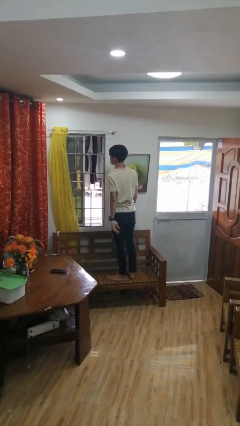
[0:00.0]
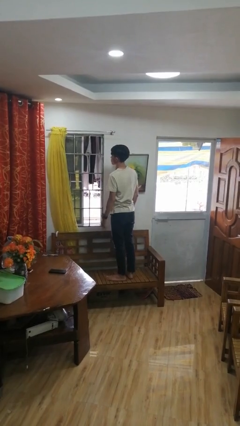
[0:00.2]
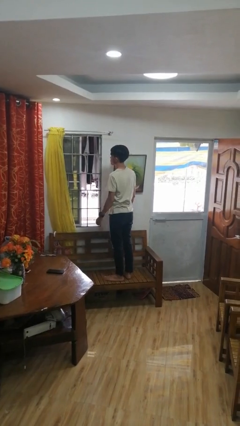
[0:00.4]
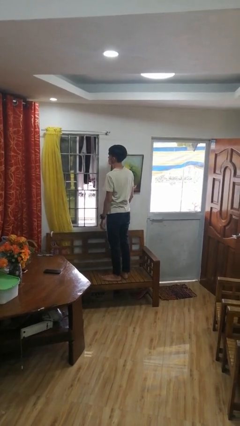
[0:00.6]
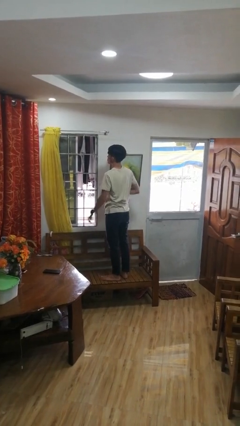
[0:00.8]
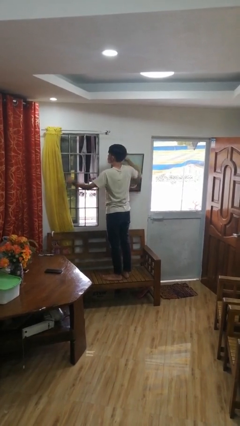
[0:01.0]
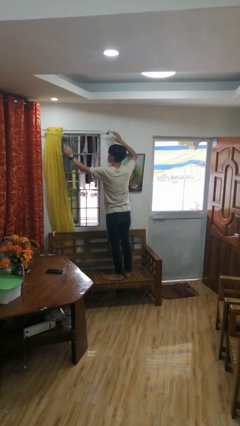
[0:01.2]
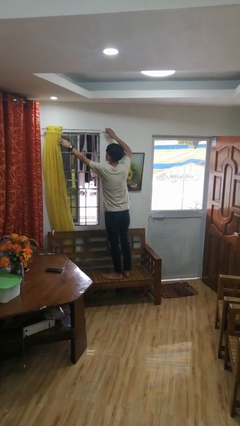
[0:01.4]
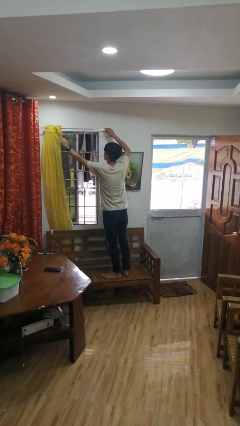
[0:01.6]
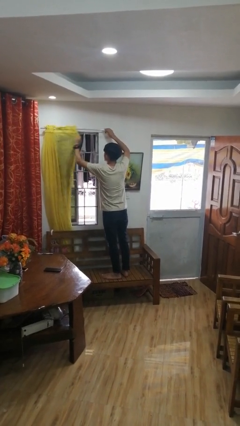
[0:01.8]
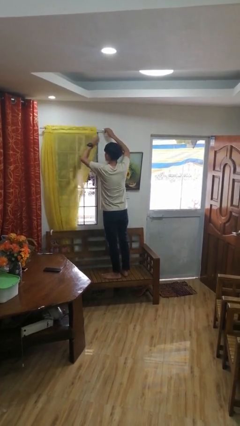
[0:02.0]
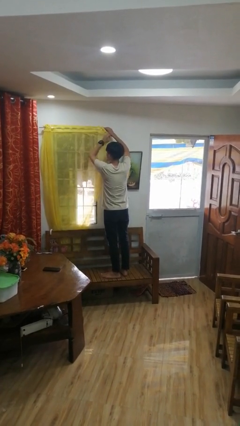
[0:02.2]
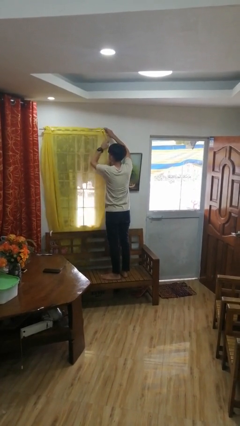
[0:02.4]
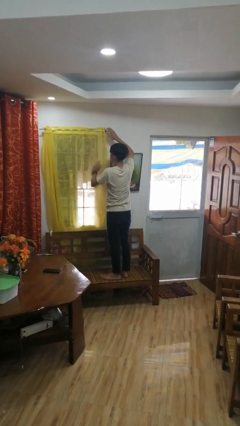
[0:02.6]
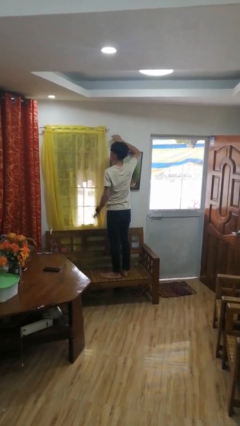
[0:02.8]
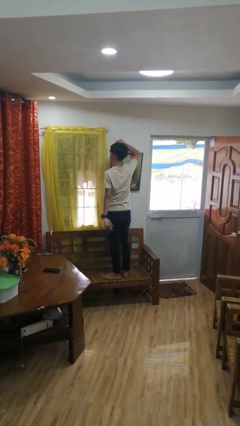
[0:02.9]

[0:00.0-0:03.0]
person closes curtains

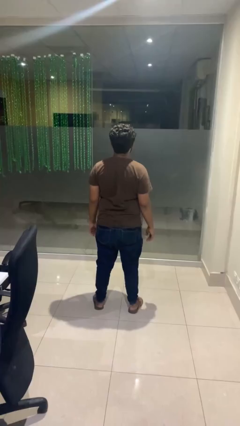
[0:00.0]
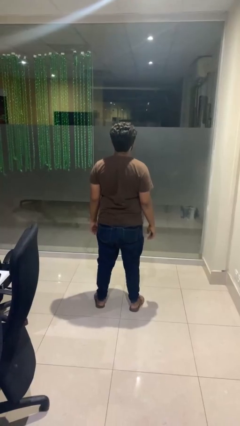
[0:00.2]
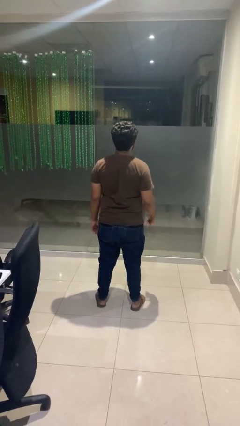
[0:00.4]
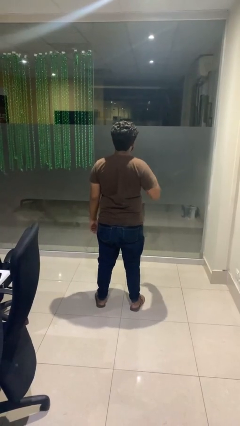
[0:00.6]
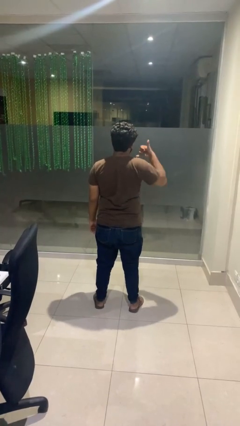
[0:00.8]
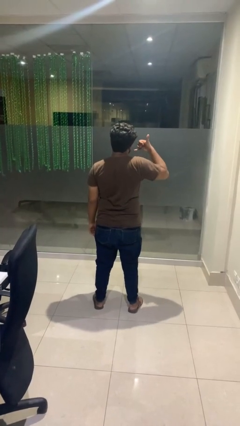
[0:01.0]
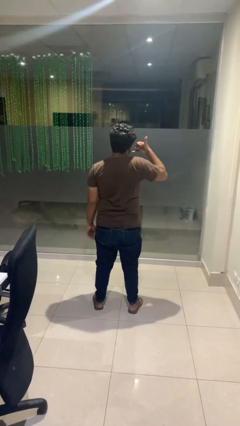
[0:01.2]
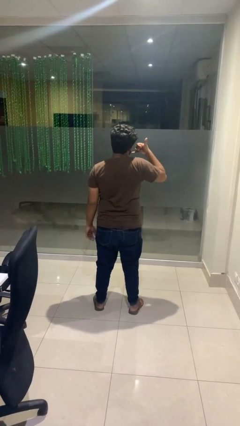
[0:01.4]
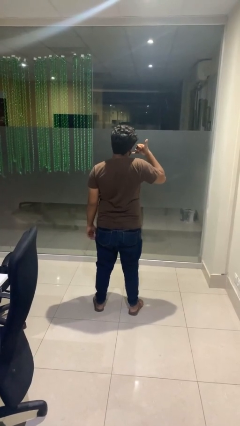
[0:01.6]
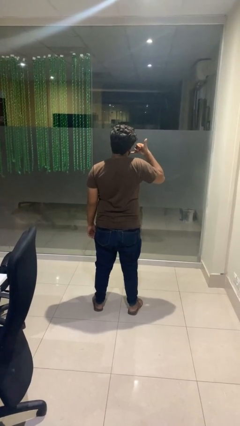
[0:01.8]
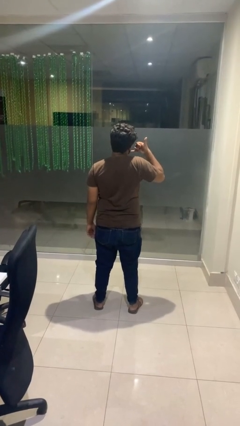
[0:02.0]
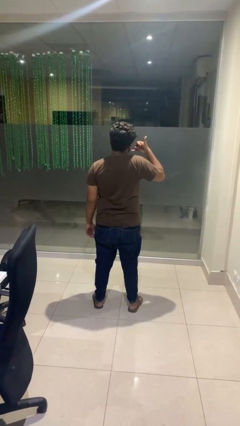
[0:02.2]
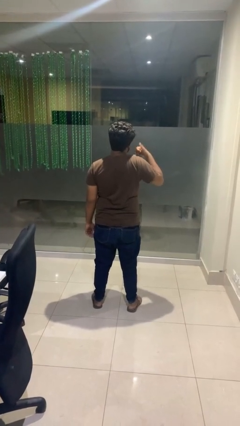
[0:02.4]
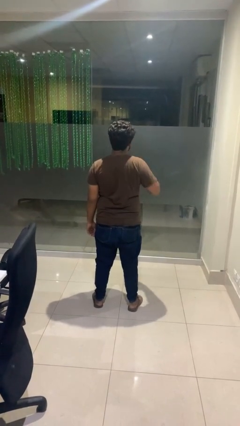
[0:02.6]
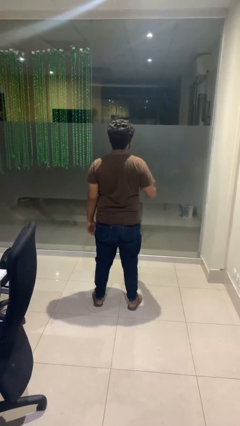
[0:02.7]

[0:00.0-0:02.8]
person gestures call me

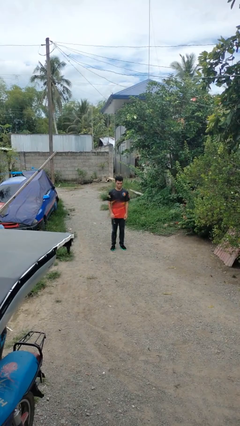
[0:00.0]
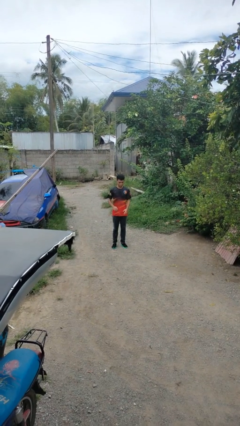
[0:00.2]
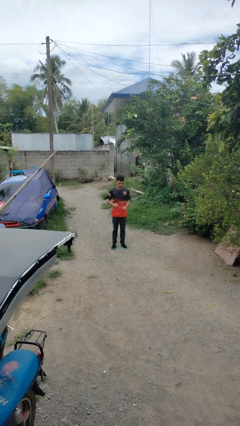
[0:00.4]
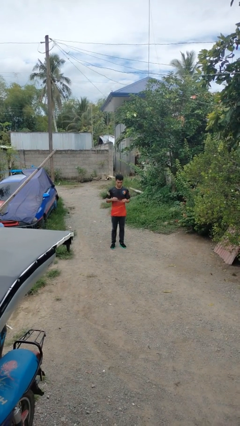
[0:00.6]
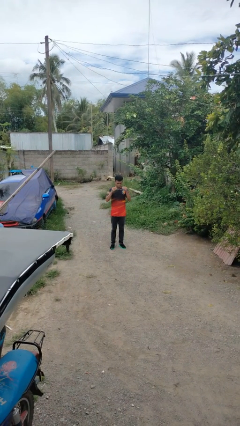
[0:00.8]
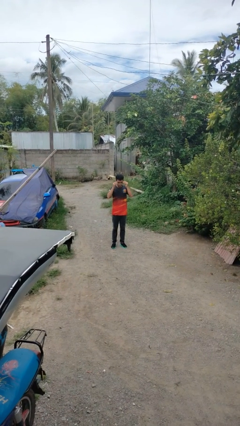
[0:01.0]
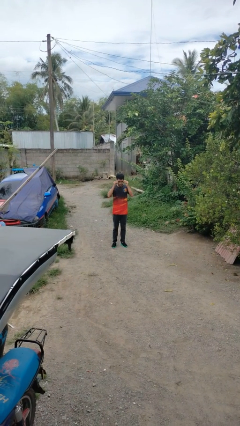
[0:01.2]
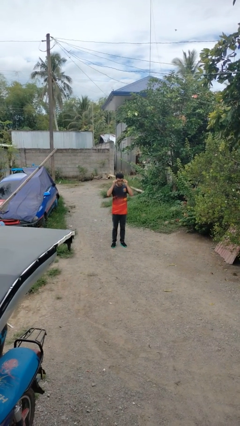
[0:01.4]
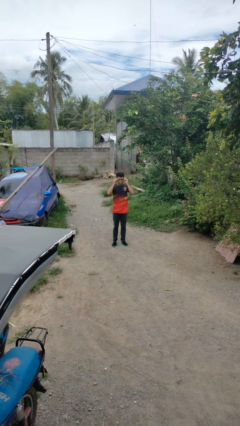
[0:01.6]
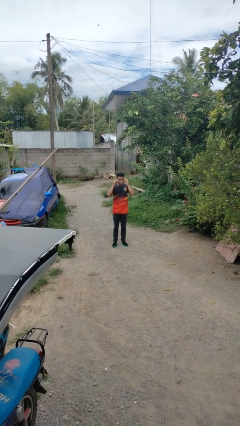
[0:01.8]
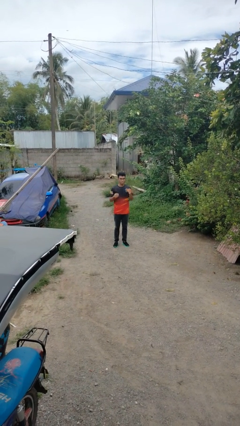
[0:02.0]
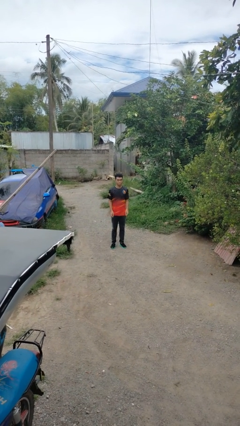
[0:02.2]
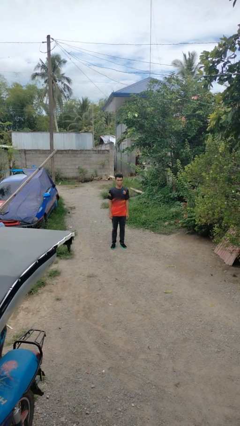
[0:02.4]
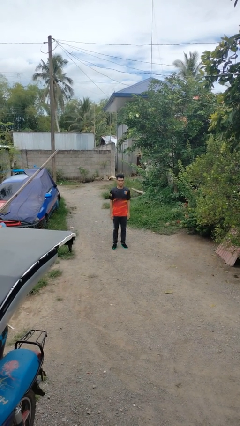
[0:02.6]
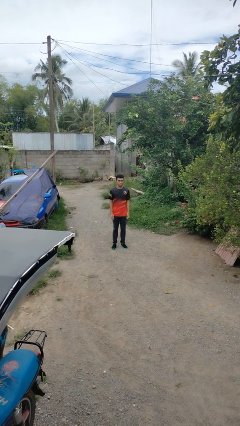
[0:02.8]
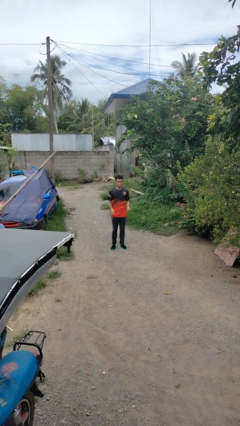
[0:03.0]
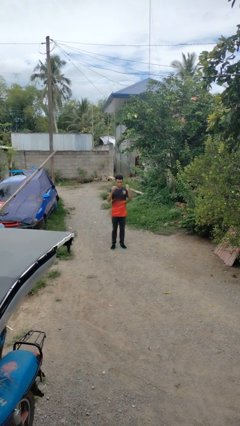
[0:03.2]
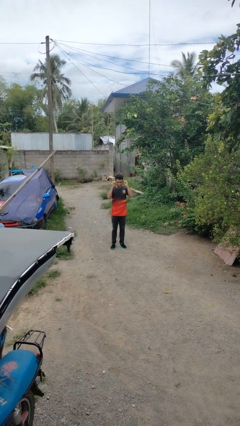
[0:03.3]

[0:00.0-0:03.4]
person puts on glasses

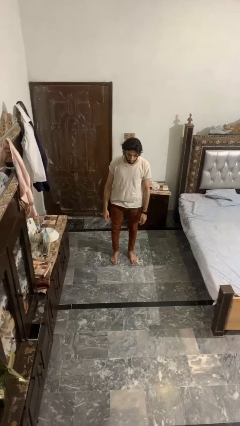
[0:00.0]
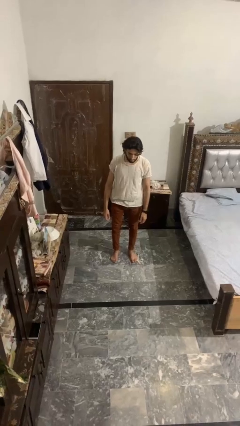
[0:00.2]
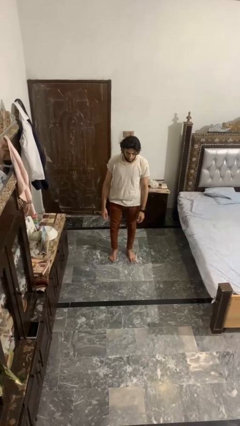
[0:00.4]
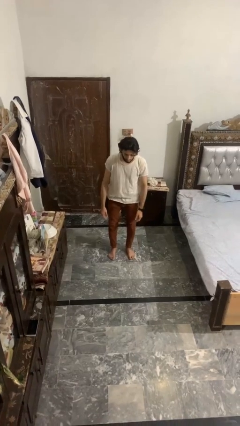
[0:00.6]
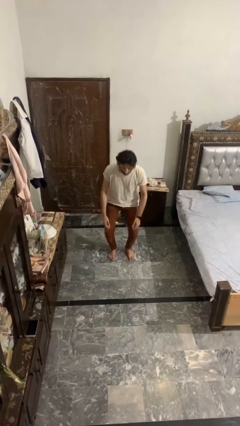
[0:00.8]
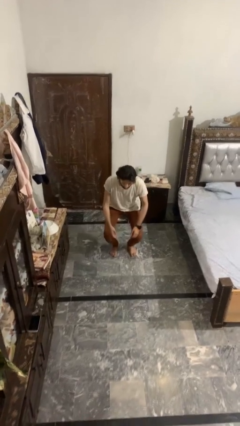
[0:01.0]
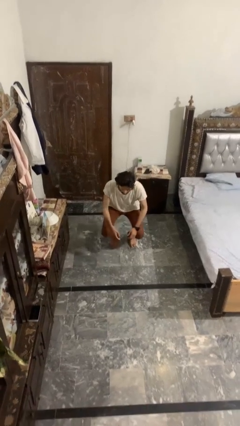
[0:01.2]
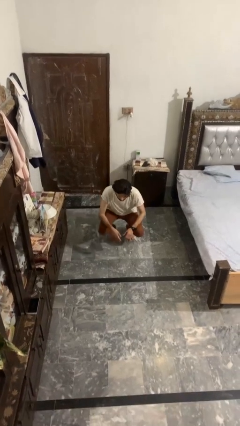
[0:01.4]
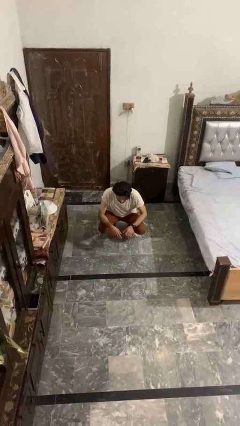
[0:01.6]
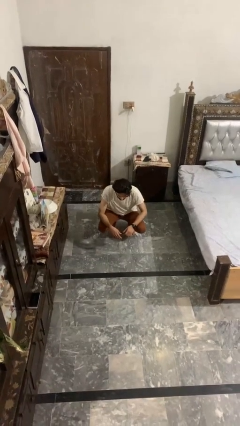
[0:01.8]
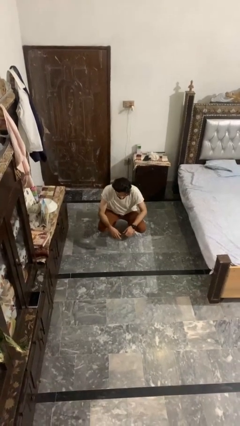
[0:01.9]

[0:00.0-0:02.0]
person squats

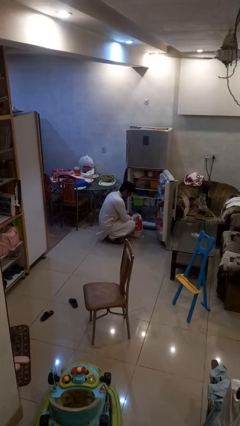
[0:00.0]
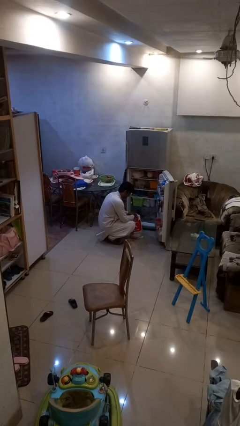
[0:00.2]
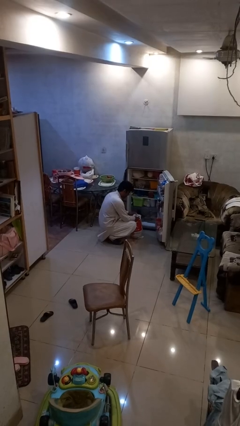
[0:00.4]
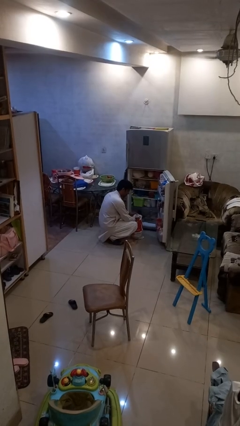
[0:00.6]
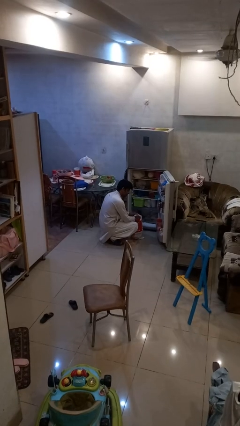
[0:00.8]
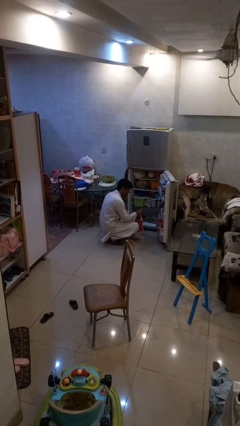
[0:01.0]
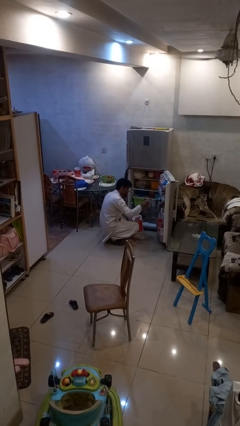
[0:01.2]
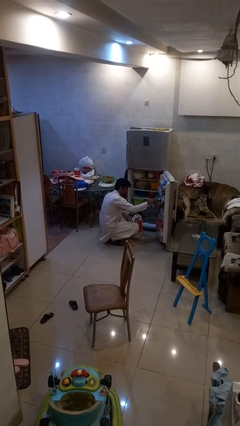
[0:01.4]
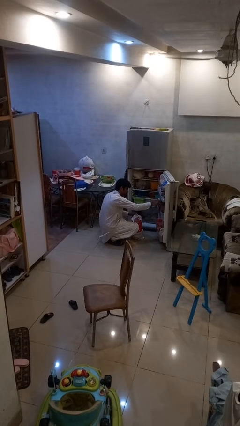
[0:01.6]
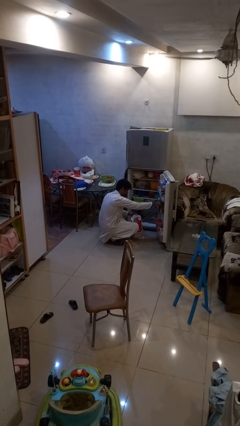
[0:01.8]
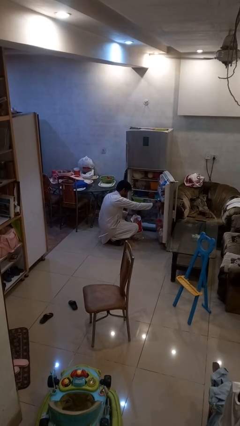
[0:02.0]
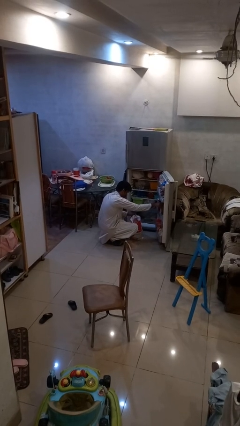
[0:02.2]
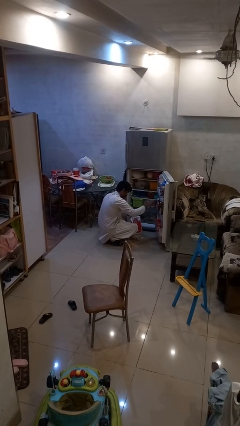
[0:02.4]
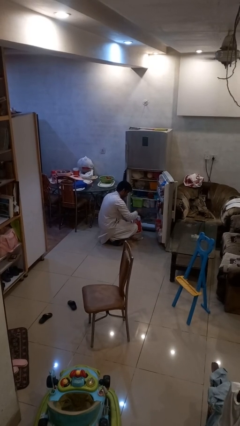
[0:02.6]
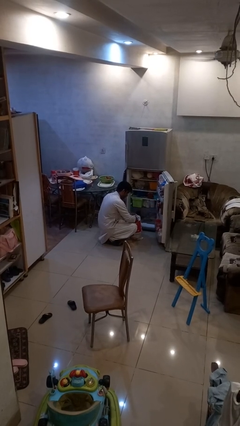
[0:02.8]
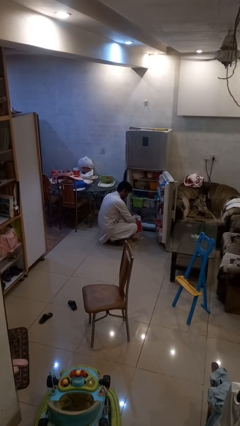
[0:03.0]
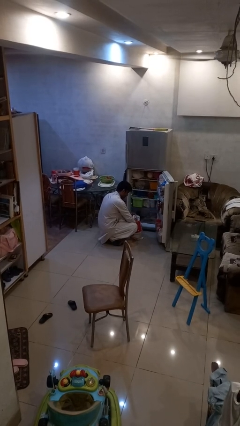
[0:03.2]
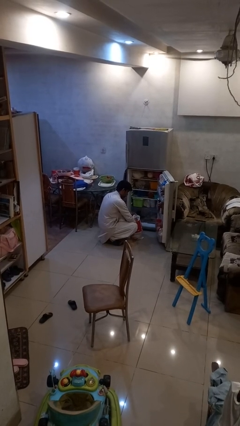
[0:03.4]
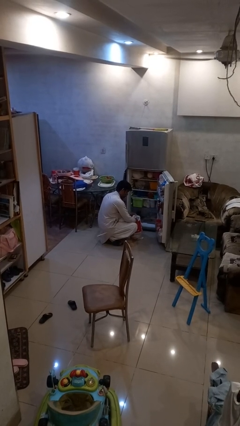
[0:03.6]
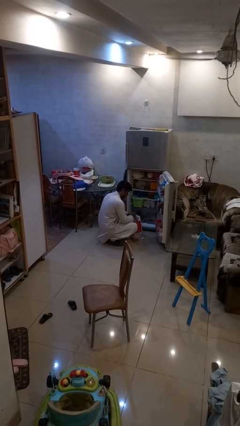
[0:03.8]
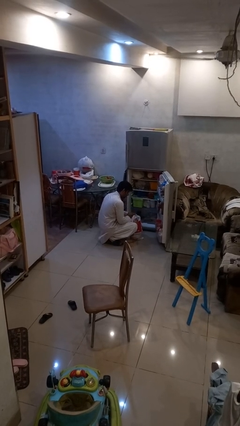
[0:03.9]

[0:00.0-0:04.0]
person loads groceries into refrigerator

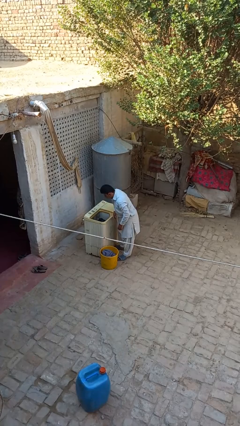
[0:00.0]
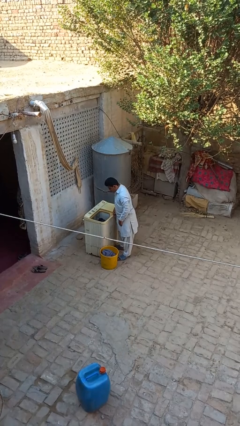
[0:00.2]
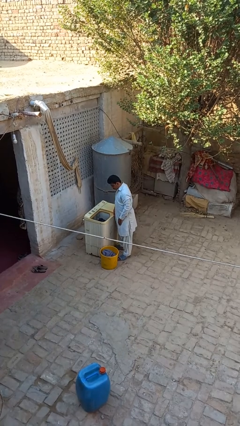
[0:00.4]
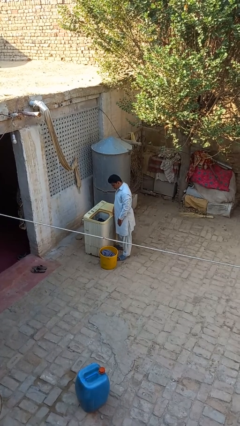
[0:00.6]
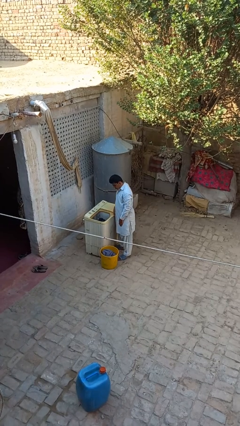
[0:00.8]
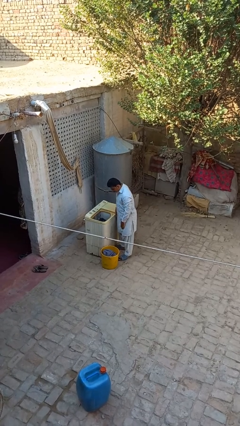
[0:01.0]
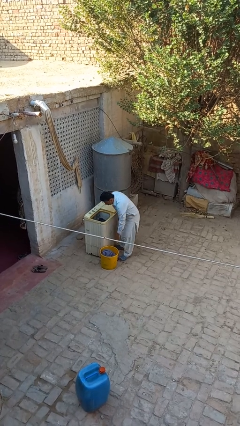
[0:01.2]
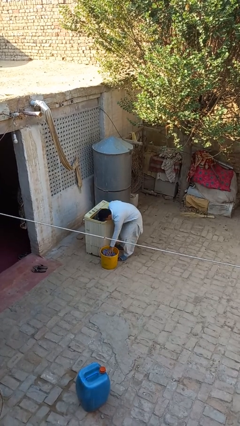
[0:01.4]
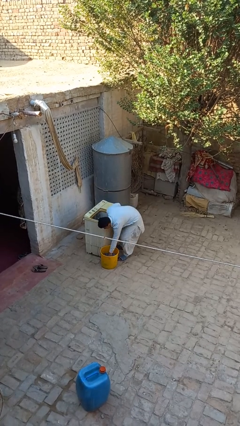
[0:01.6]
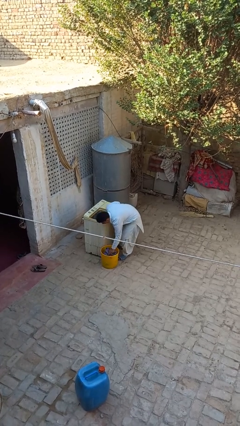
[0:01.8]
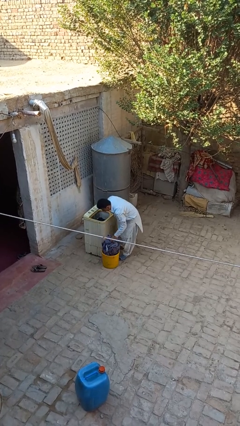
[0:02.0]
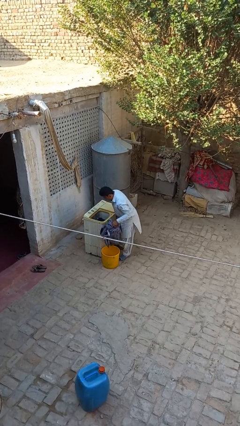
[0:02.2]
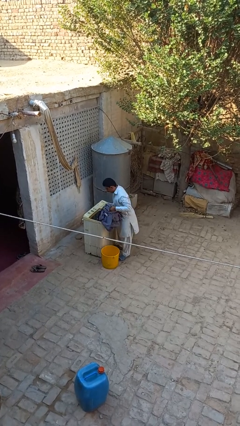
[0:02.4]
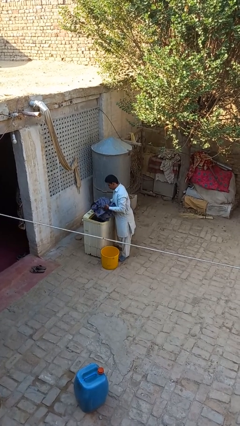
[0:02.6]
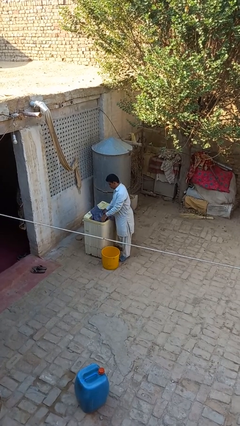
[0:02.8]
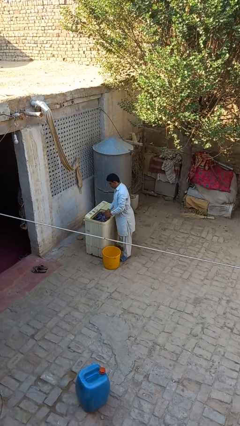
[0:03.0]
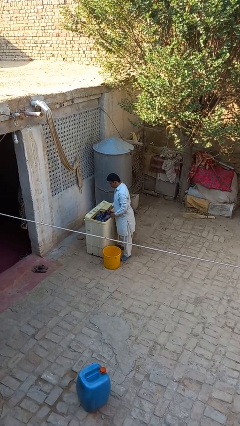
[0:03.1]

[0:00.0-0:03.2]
person loads clotheswasher
